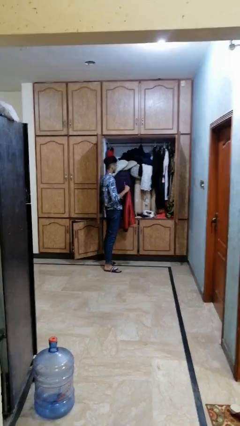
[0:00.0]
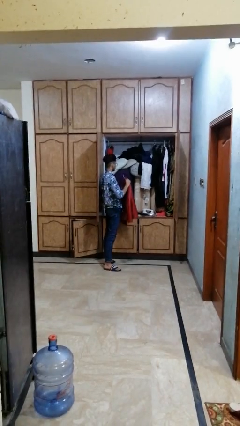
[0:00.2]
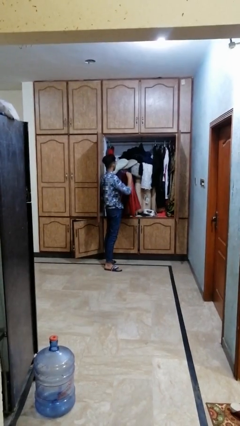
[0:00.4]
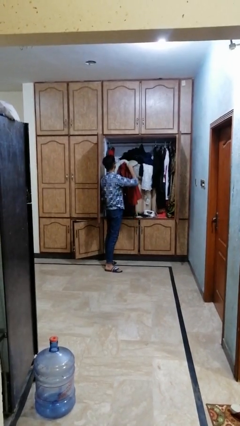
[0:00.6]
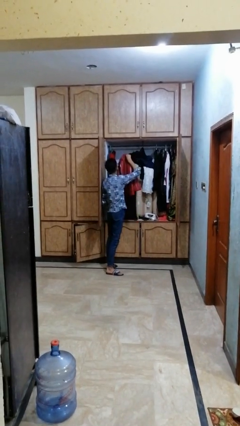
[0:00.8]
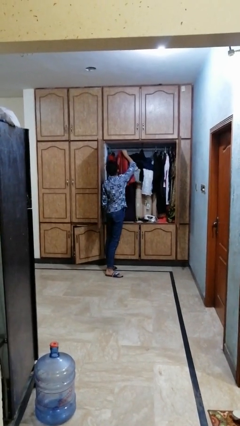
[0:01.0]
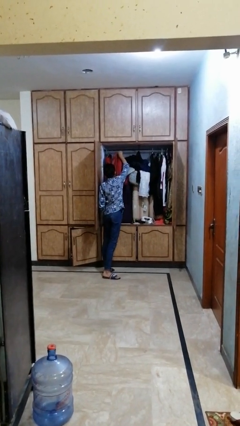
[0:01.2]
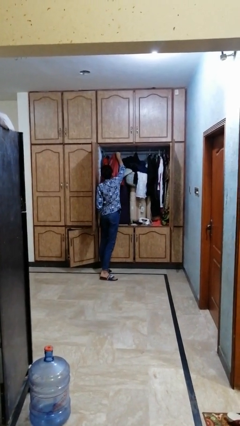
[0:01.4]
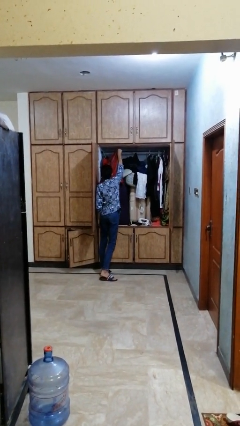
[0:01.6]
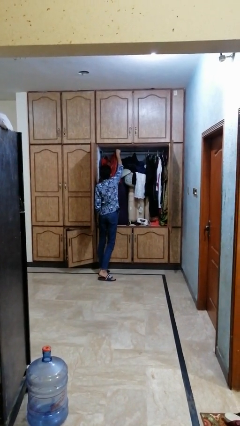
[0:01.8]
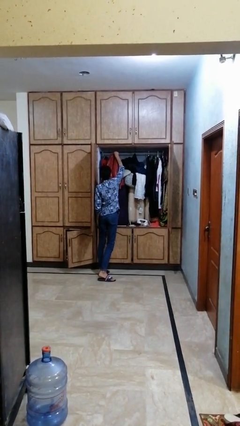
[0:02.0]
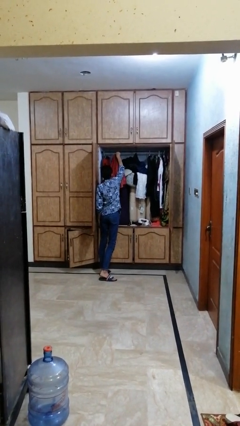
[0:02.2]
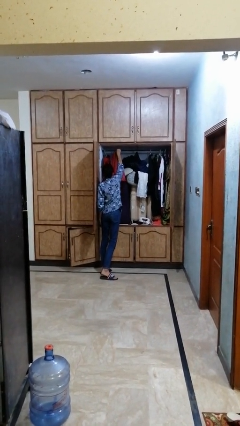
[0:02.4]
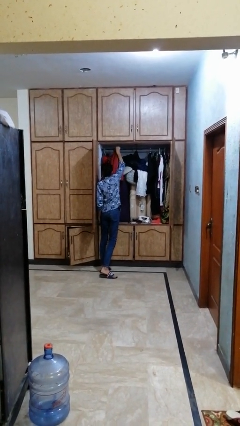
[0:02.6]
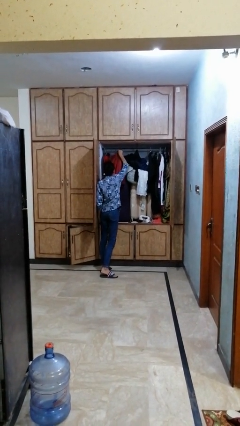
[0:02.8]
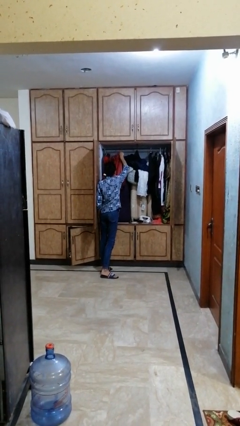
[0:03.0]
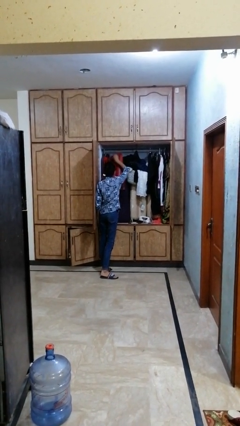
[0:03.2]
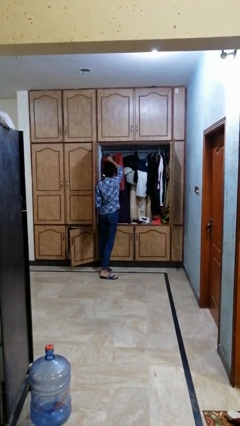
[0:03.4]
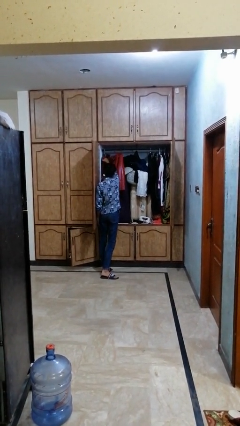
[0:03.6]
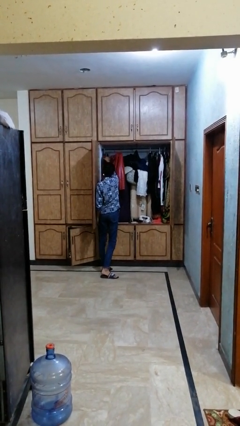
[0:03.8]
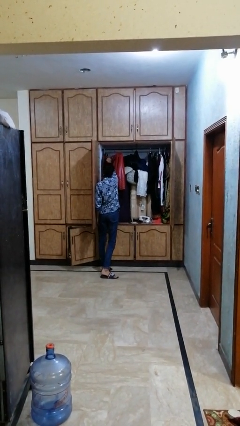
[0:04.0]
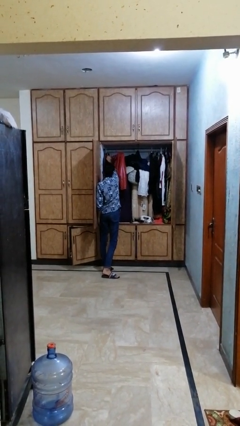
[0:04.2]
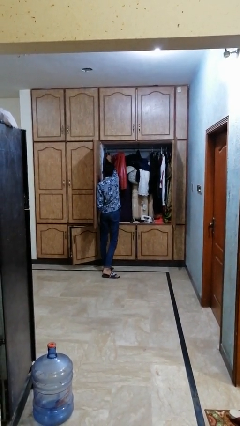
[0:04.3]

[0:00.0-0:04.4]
person puts clothes into dresser

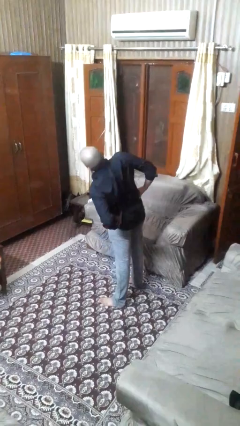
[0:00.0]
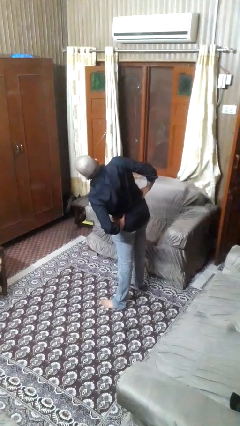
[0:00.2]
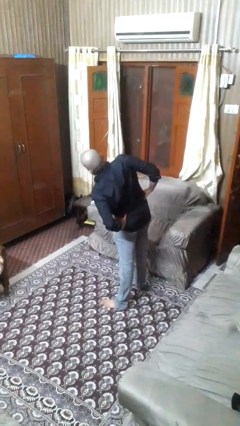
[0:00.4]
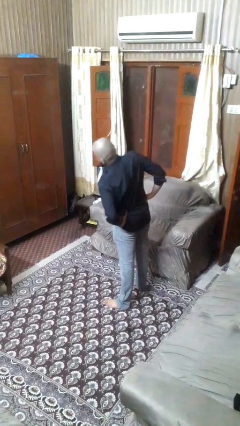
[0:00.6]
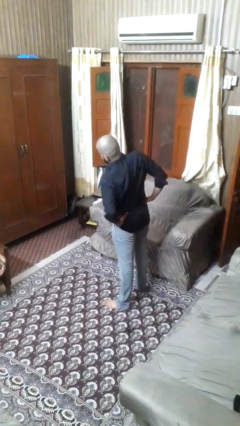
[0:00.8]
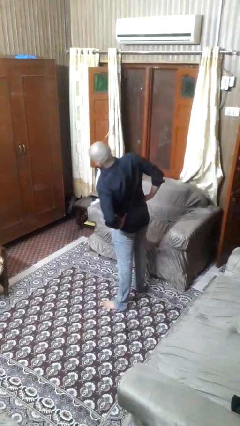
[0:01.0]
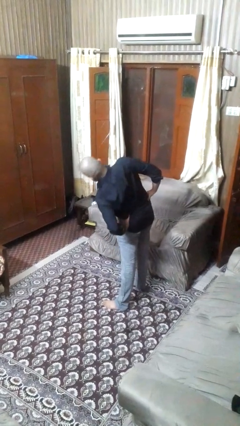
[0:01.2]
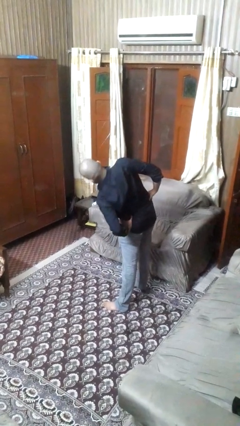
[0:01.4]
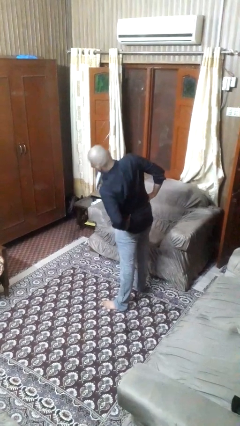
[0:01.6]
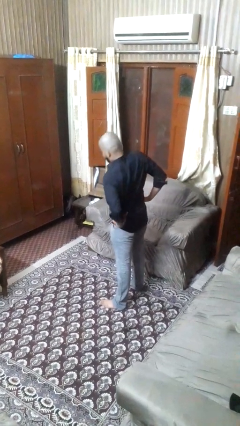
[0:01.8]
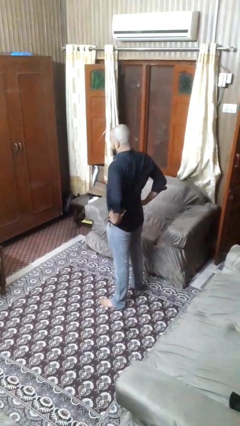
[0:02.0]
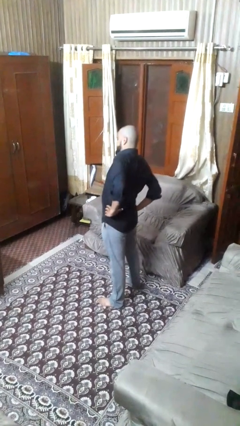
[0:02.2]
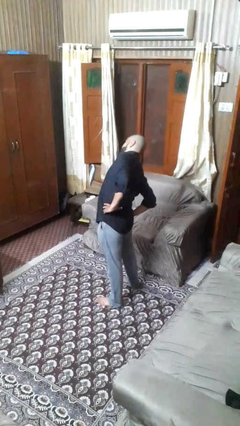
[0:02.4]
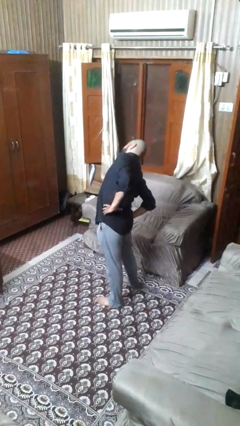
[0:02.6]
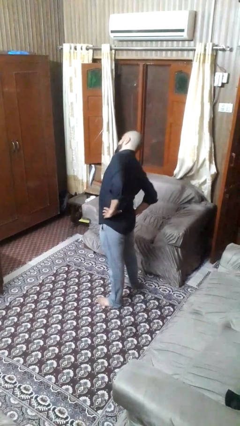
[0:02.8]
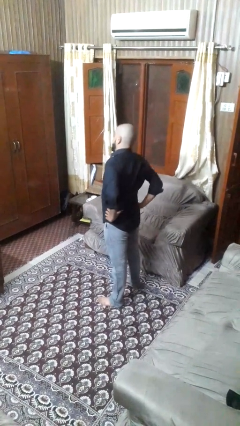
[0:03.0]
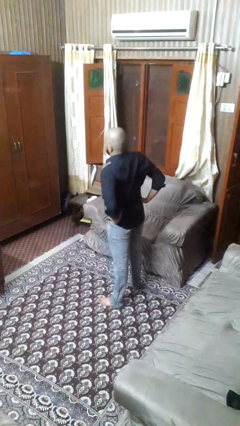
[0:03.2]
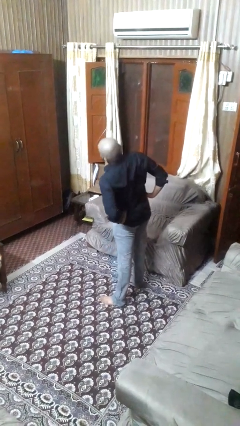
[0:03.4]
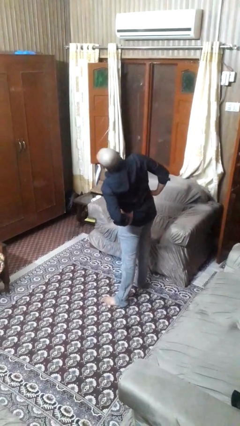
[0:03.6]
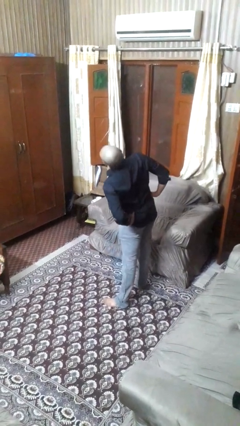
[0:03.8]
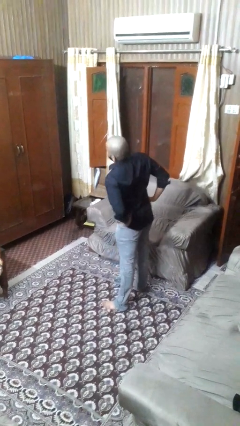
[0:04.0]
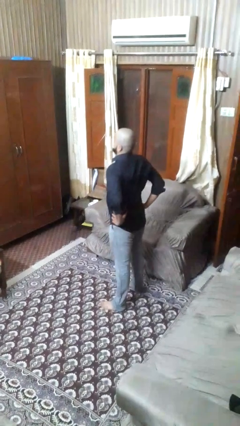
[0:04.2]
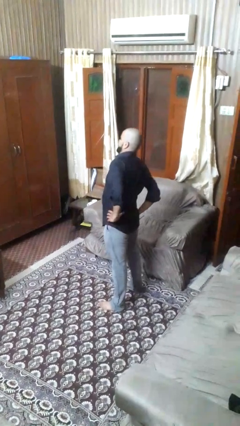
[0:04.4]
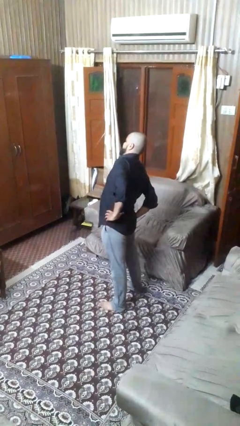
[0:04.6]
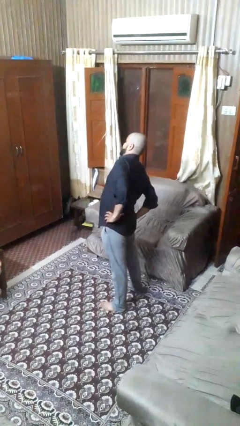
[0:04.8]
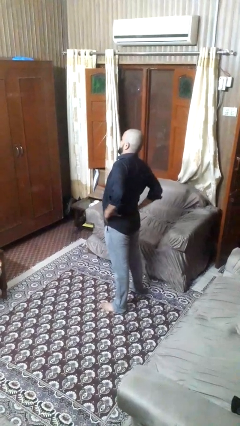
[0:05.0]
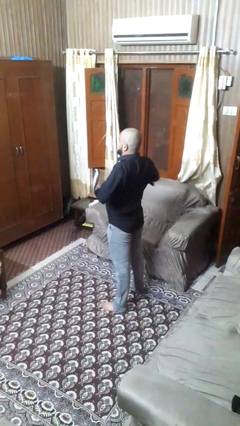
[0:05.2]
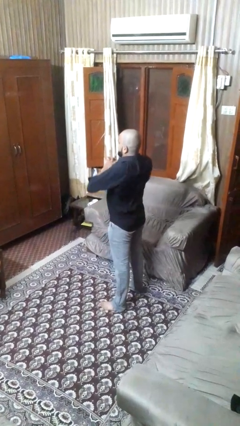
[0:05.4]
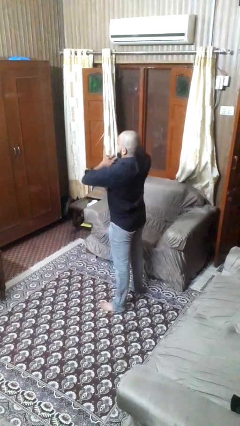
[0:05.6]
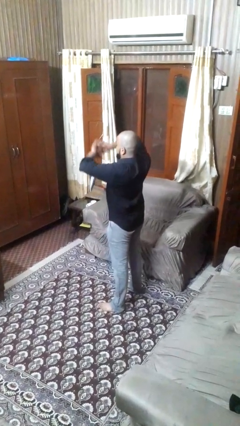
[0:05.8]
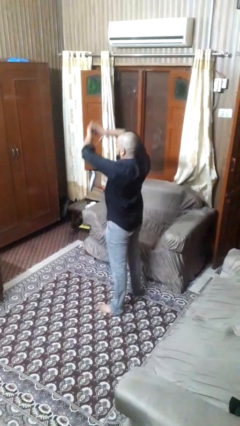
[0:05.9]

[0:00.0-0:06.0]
person stretches arms to side

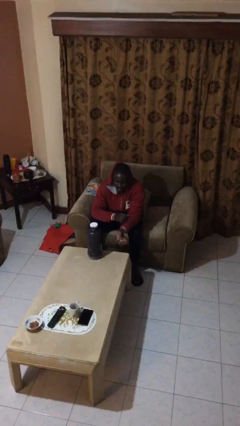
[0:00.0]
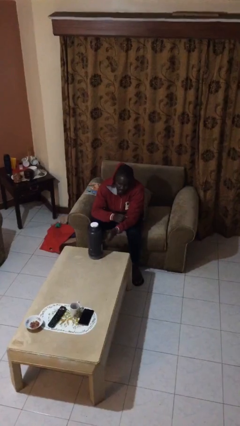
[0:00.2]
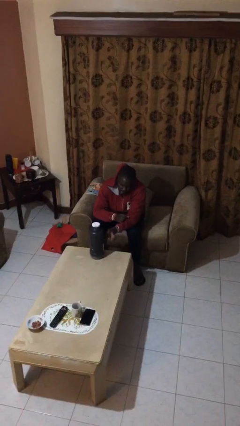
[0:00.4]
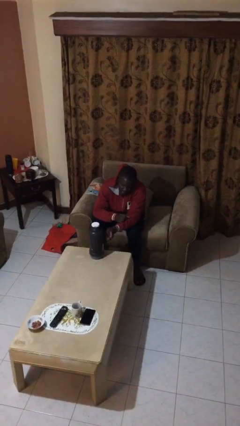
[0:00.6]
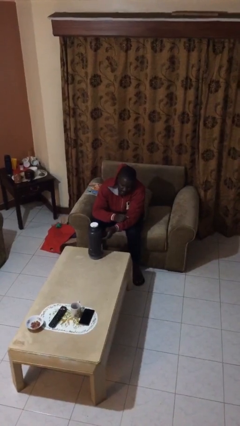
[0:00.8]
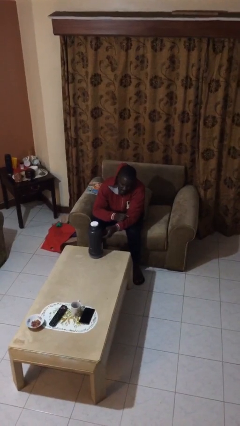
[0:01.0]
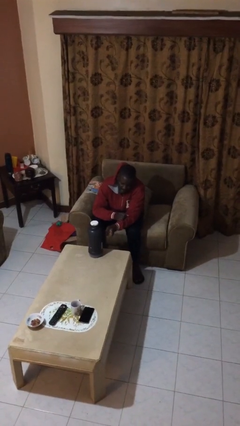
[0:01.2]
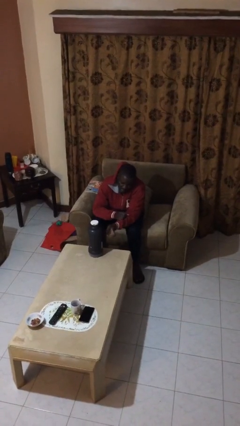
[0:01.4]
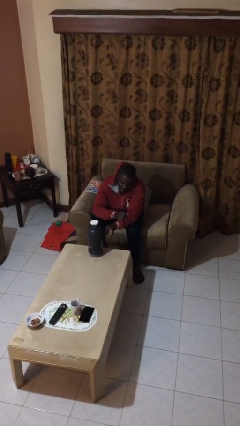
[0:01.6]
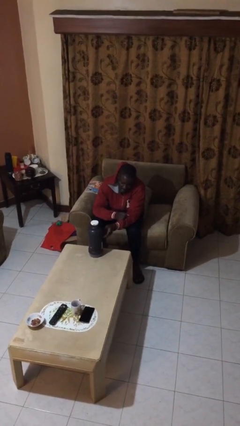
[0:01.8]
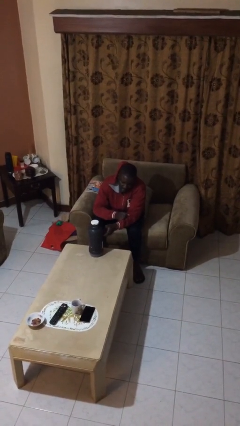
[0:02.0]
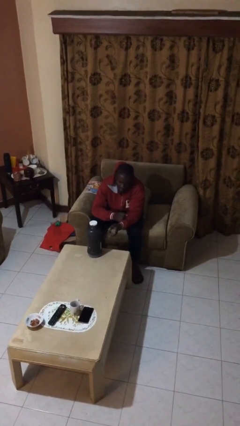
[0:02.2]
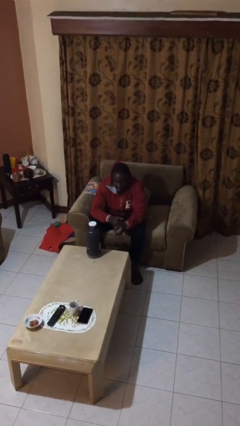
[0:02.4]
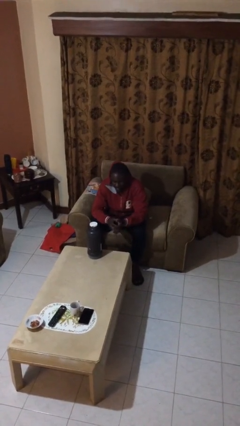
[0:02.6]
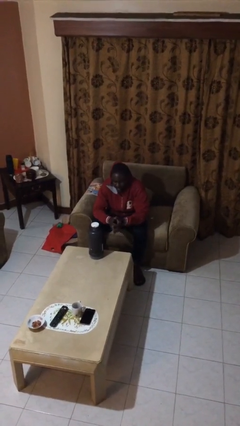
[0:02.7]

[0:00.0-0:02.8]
person taps object with finger

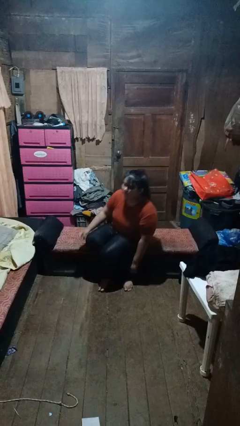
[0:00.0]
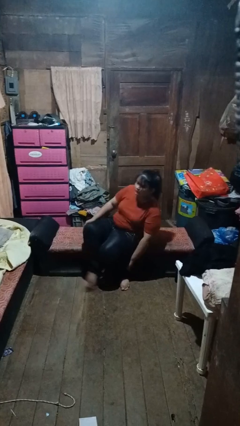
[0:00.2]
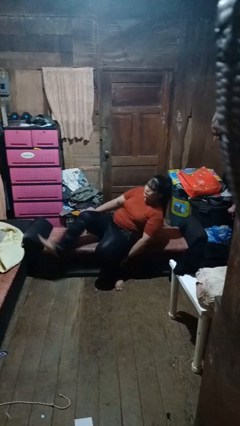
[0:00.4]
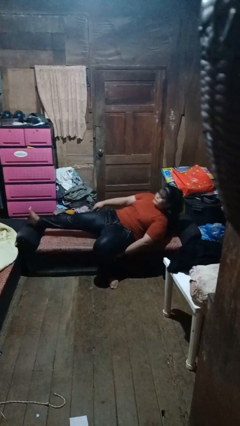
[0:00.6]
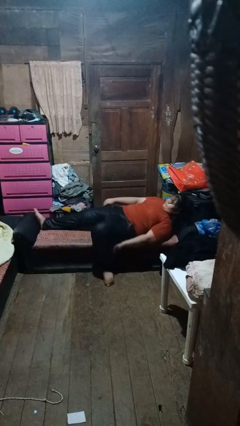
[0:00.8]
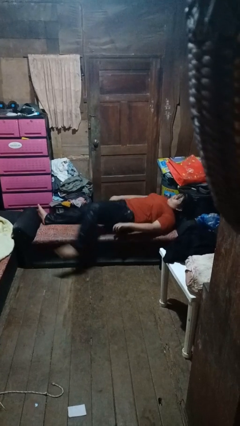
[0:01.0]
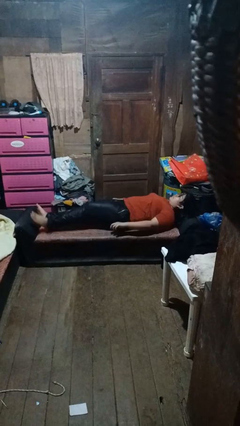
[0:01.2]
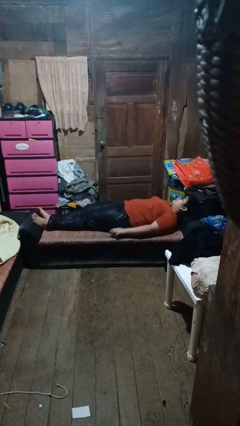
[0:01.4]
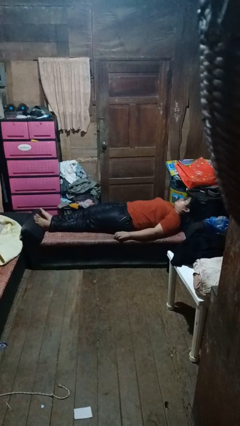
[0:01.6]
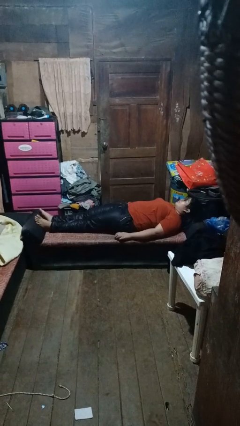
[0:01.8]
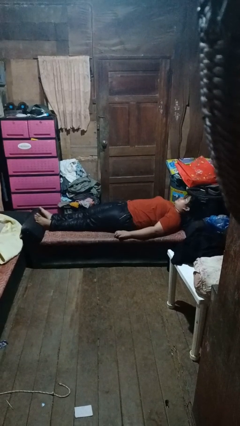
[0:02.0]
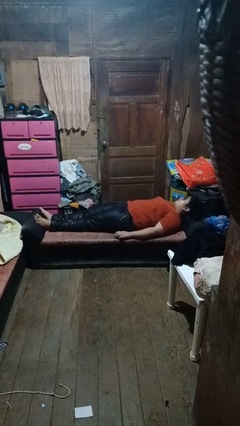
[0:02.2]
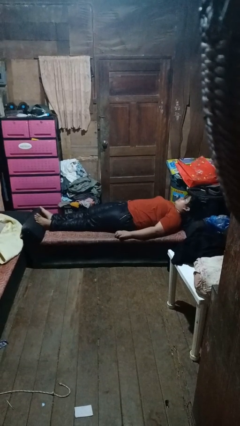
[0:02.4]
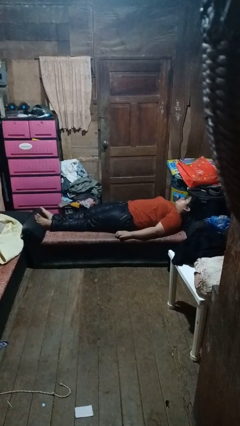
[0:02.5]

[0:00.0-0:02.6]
person lies down on couch

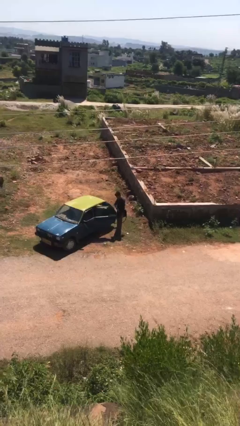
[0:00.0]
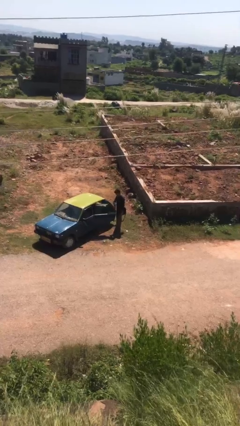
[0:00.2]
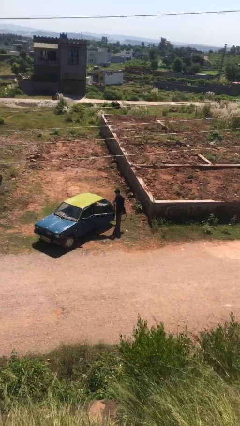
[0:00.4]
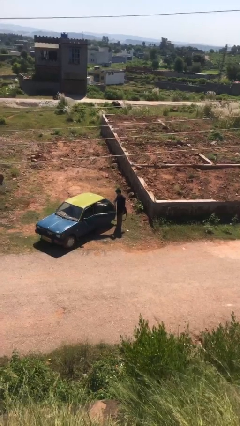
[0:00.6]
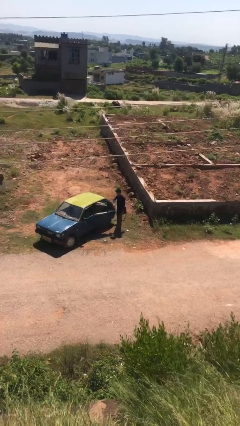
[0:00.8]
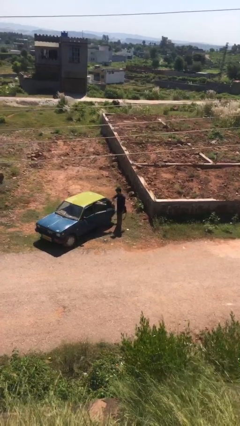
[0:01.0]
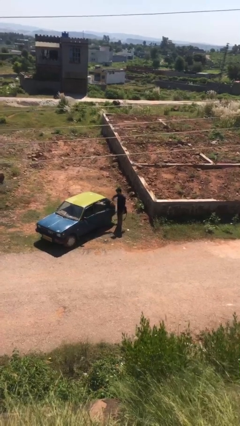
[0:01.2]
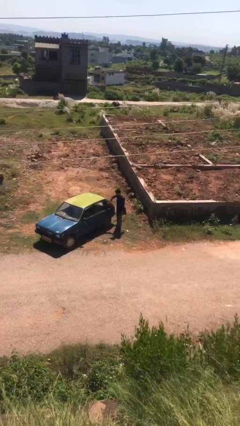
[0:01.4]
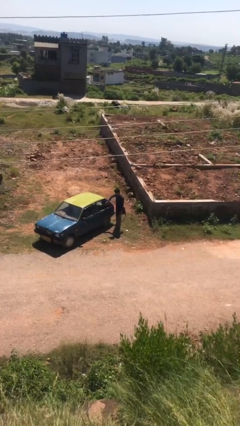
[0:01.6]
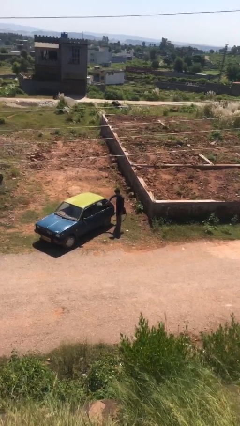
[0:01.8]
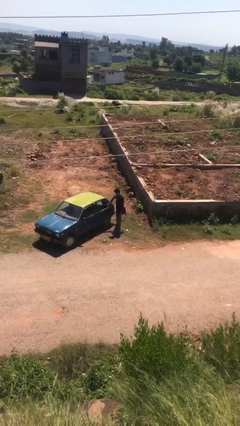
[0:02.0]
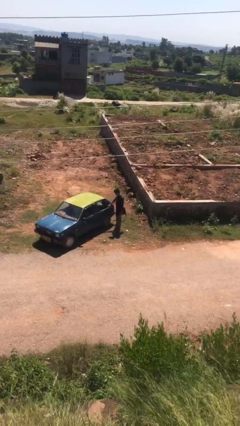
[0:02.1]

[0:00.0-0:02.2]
person closes car door
